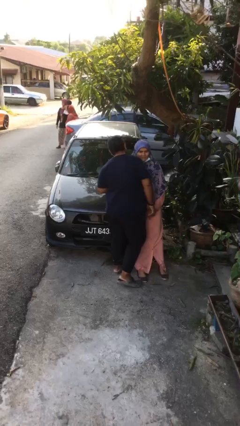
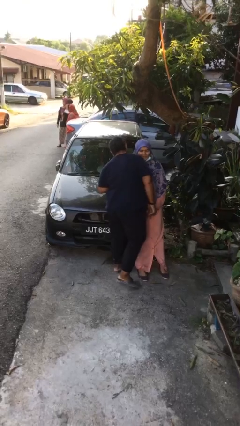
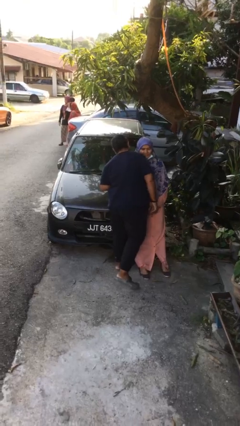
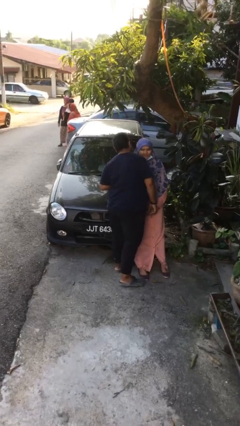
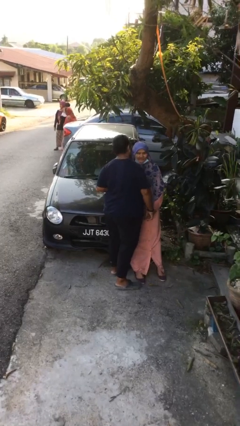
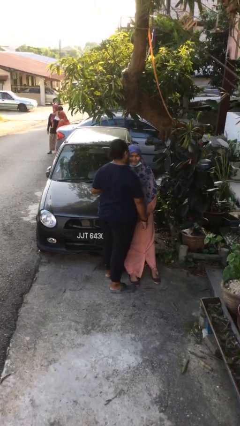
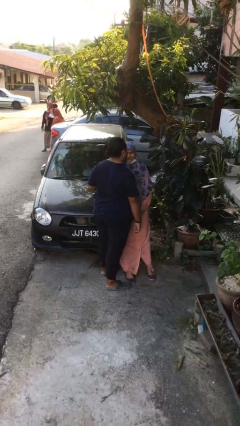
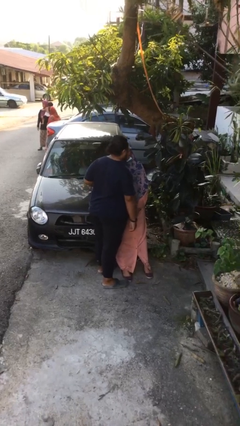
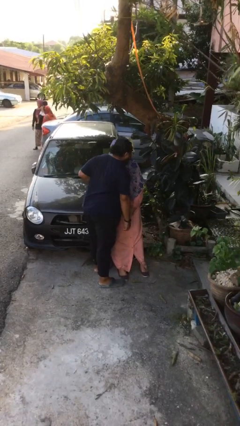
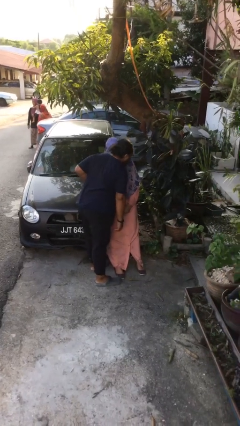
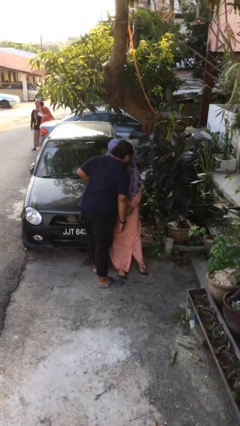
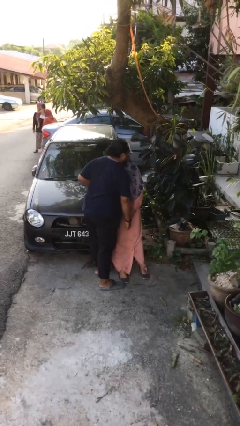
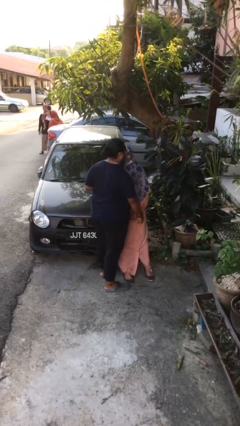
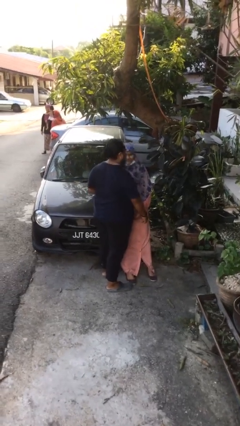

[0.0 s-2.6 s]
person kisses cheek of person

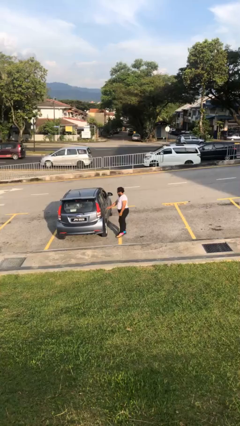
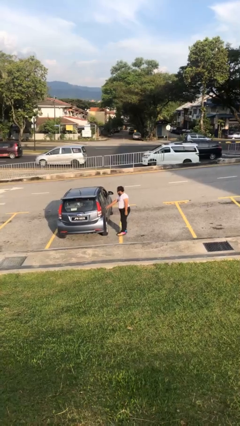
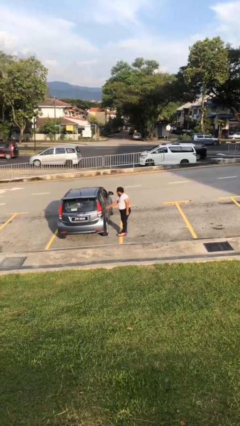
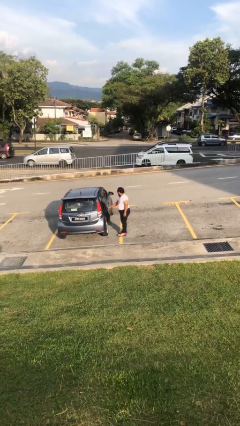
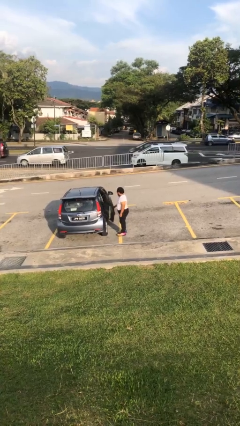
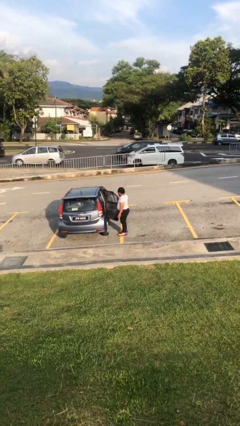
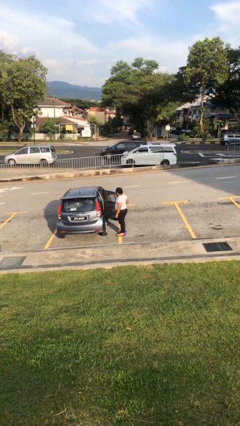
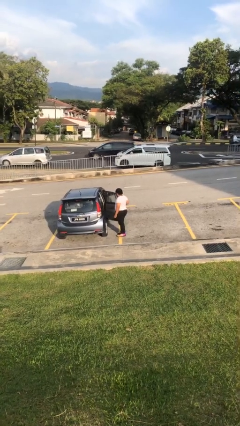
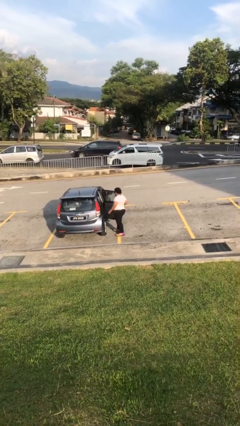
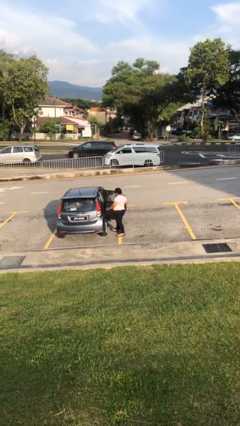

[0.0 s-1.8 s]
person opens car door

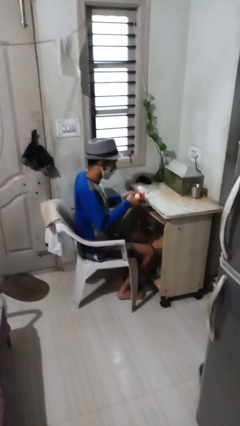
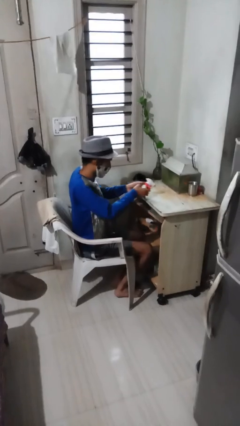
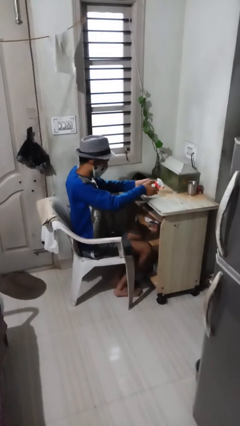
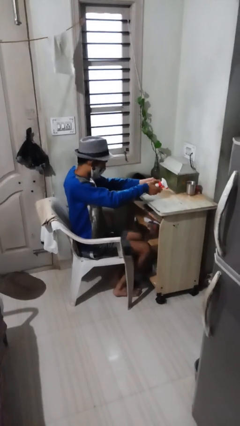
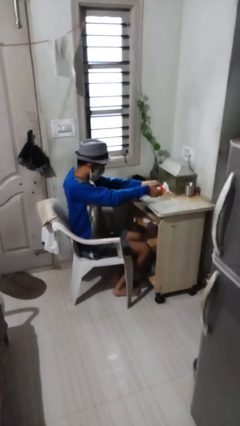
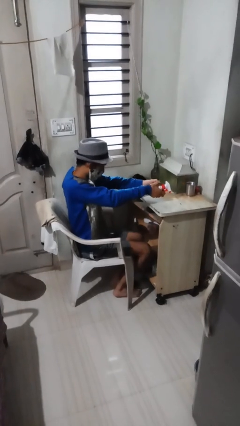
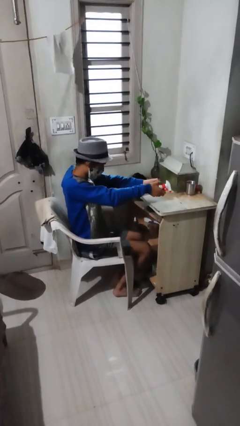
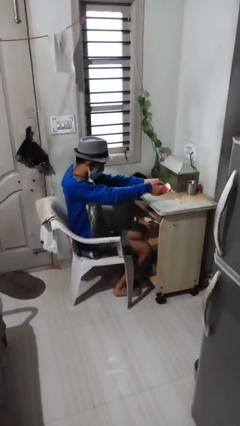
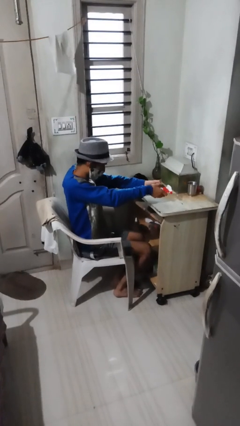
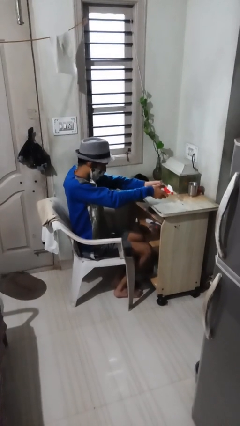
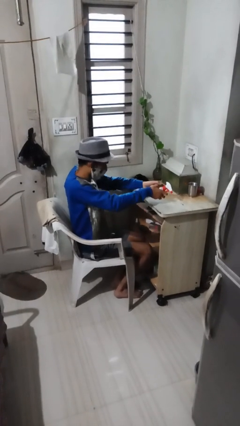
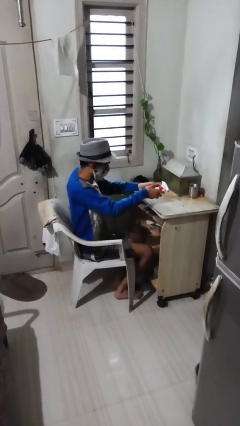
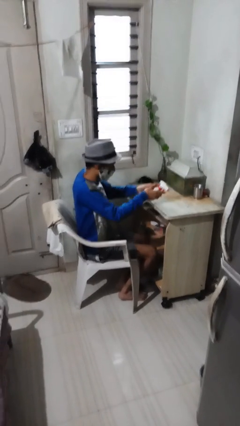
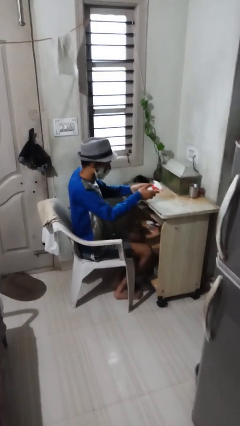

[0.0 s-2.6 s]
person sprays from bottle

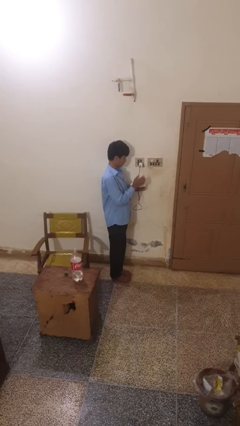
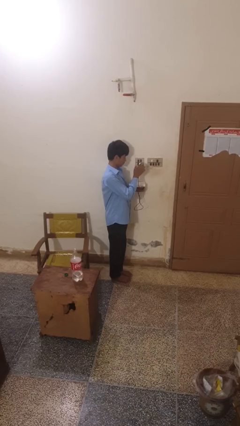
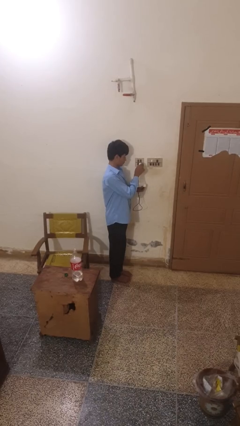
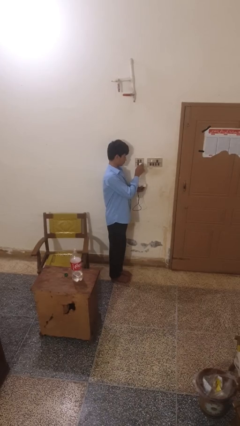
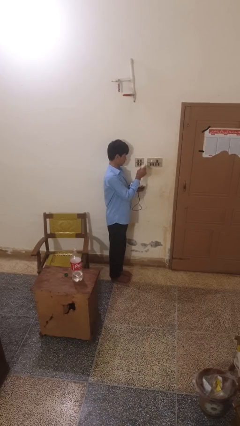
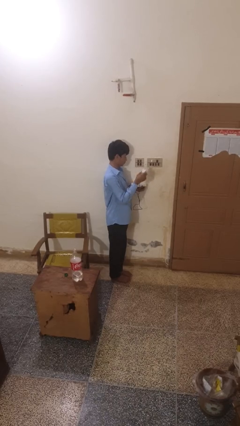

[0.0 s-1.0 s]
person unplugs from electrical socket

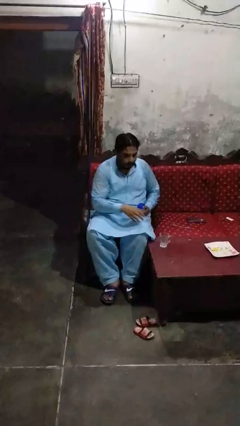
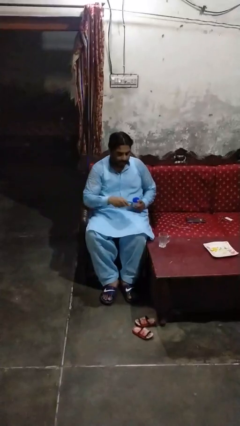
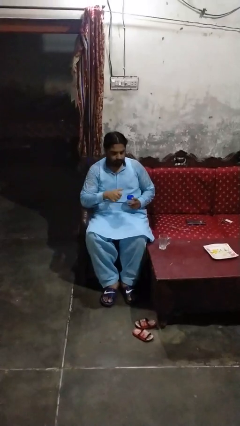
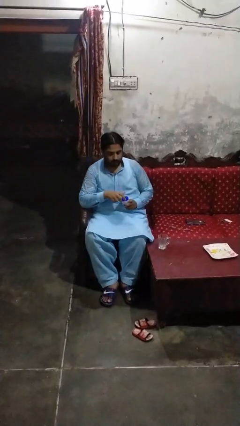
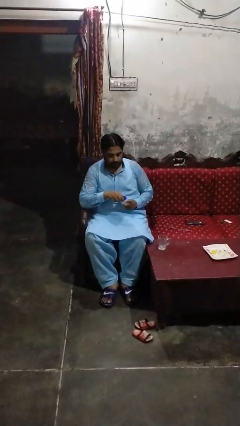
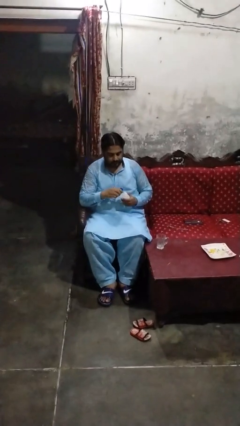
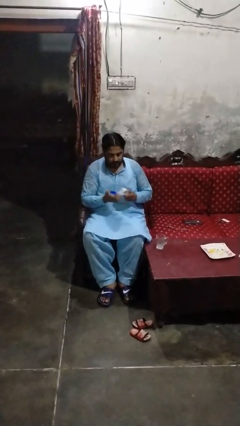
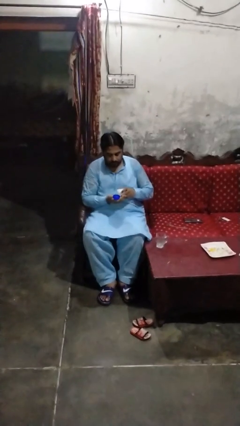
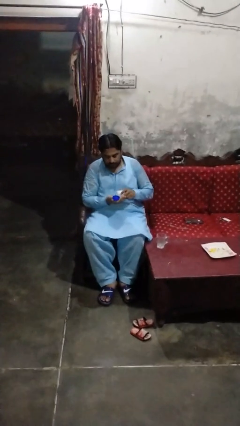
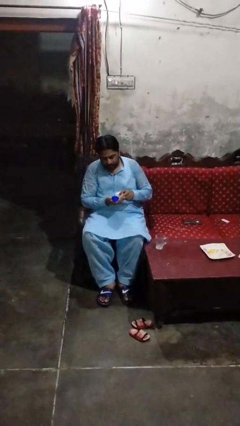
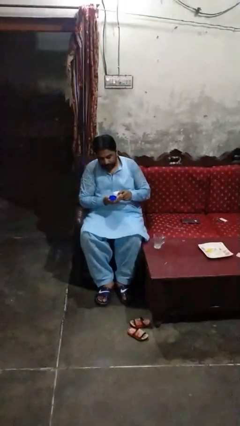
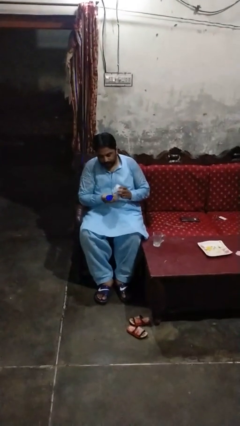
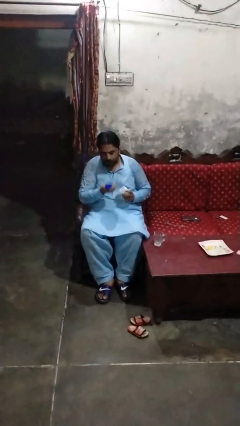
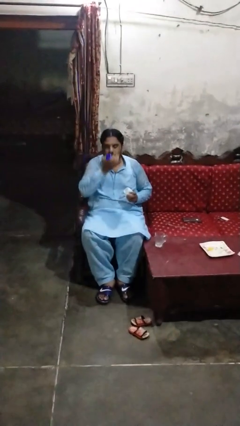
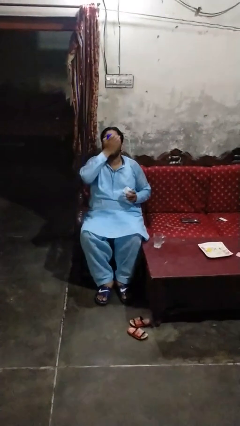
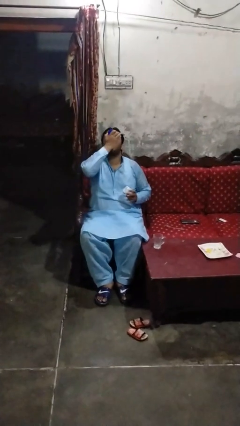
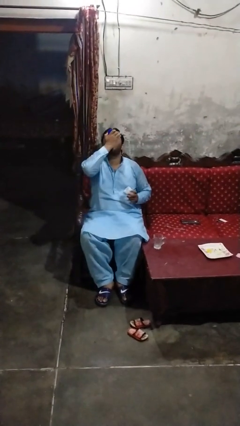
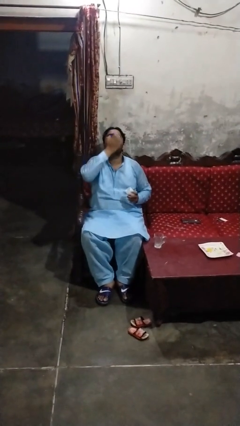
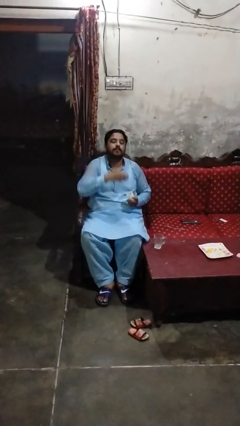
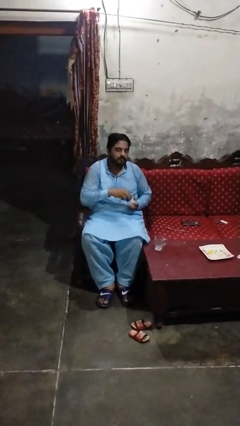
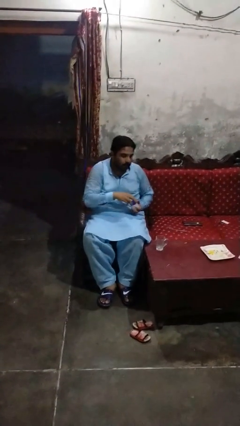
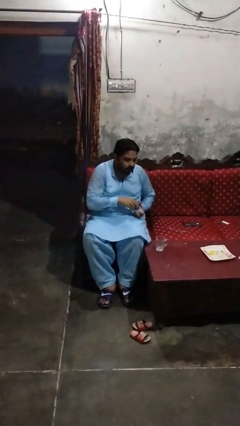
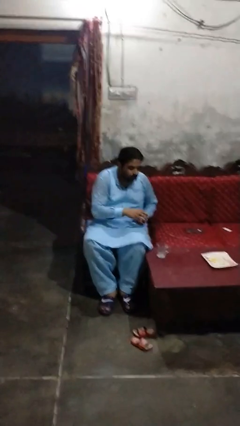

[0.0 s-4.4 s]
person takes medicine pills

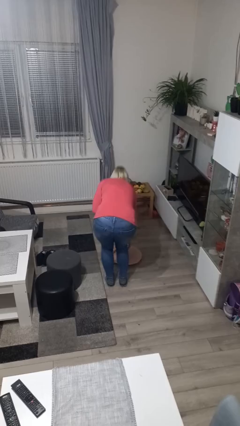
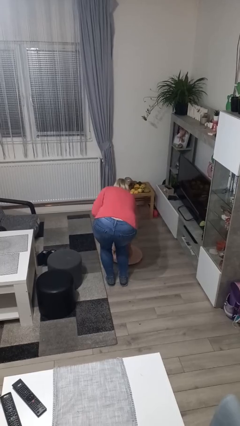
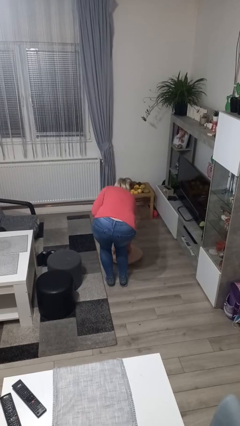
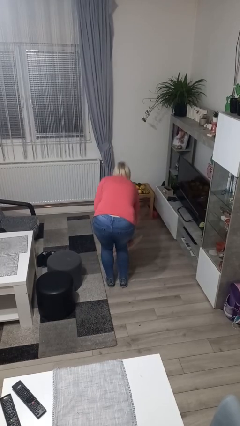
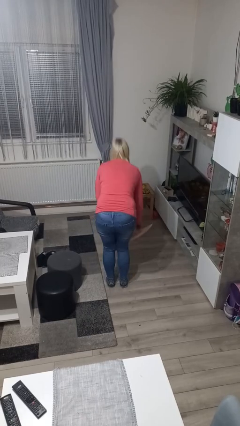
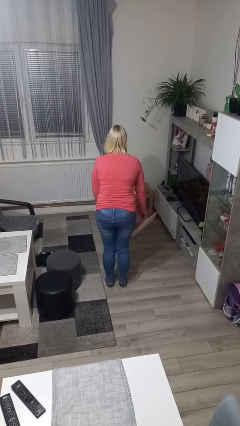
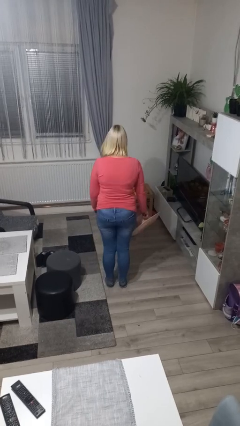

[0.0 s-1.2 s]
person picks up object from floor

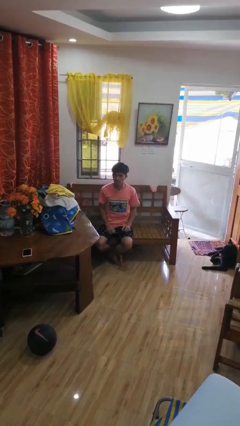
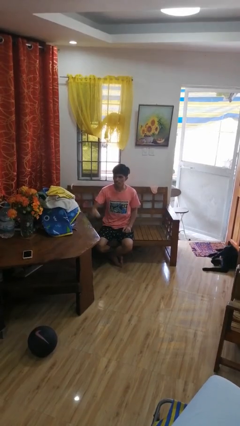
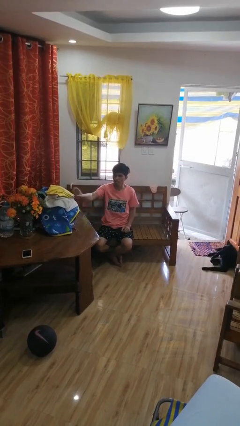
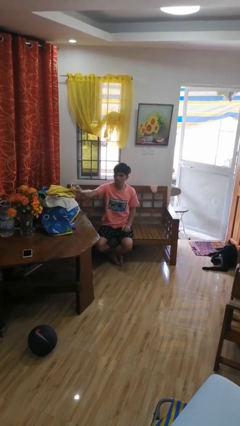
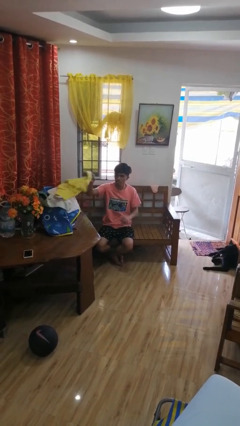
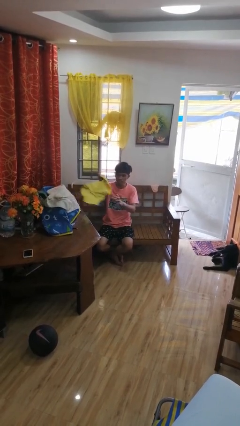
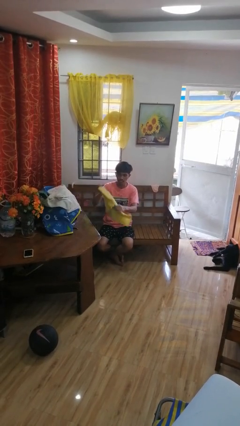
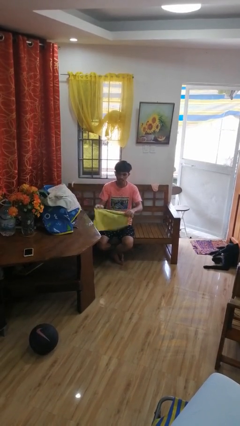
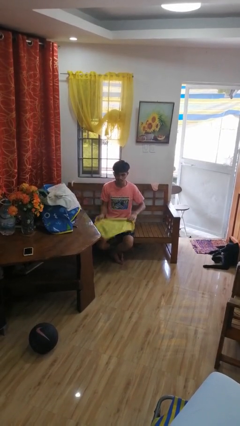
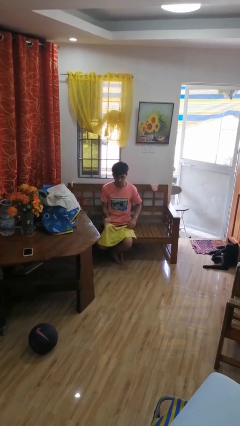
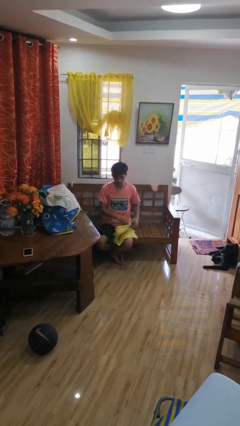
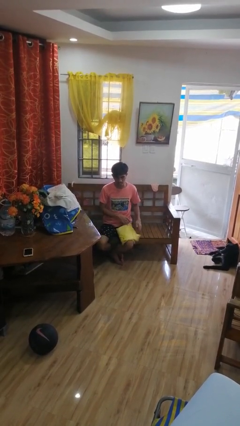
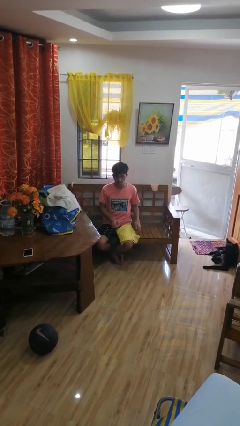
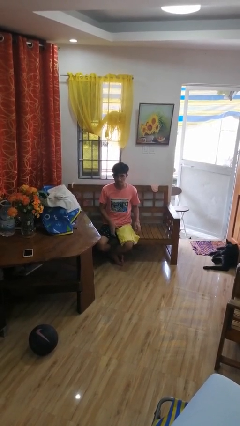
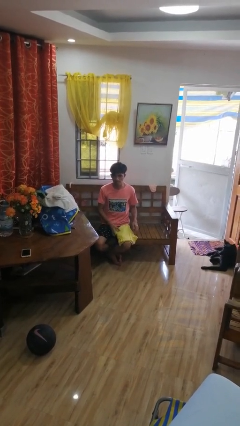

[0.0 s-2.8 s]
person folds shirt

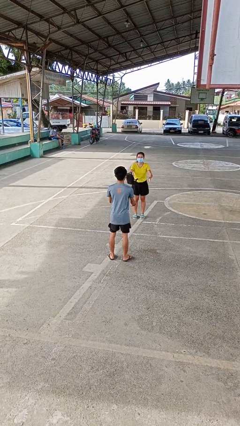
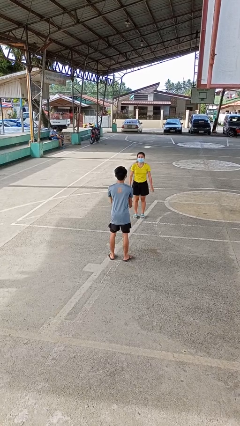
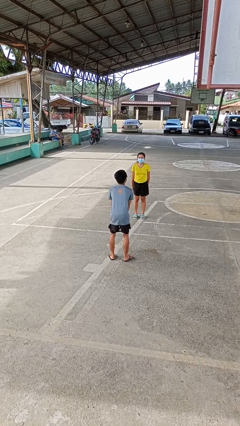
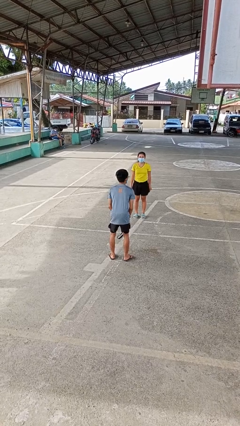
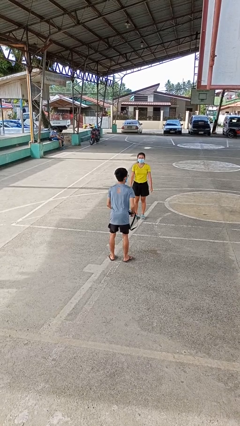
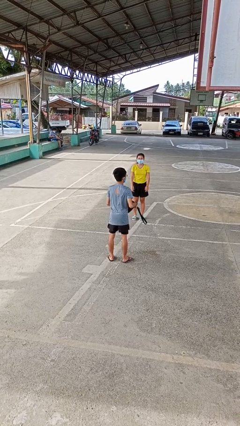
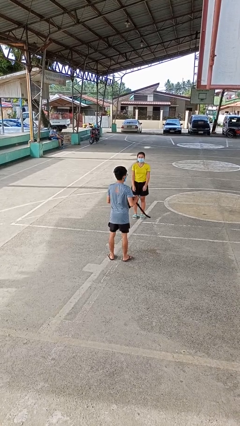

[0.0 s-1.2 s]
person catches object from person
